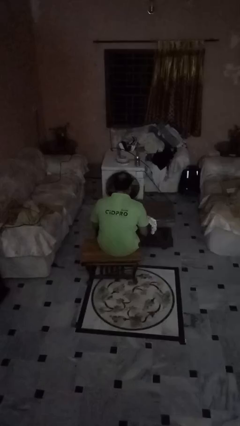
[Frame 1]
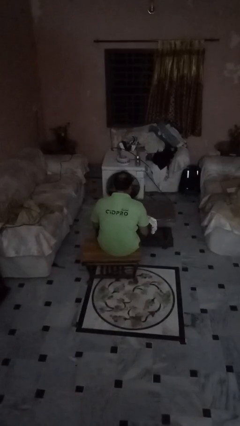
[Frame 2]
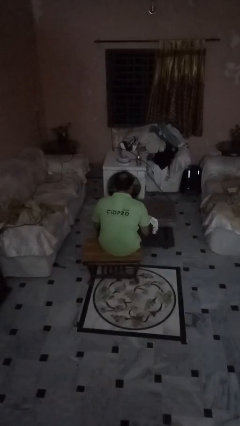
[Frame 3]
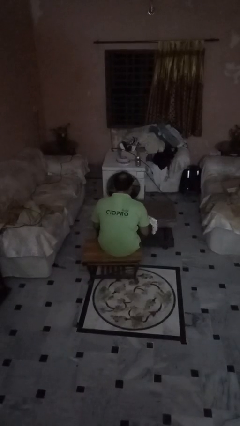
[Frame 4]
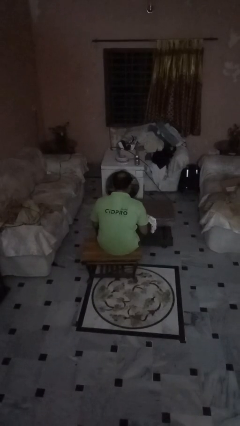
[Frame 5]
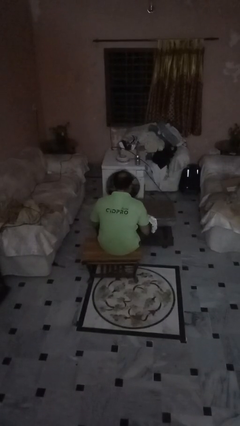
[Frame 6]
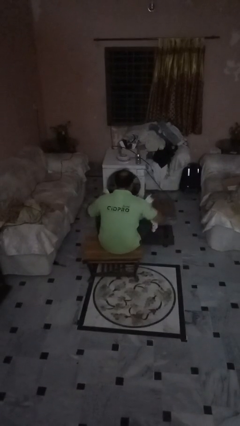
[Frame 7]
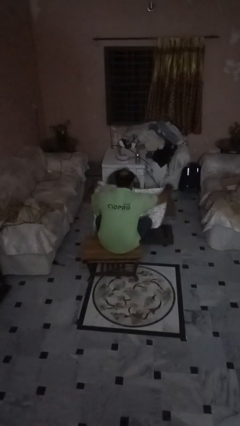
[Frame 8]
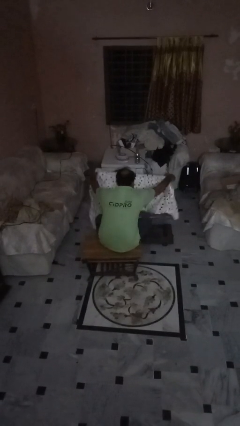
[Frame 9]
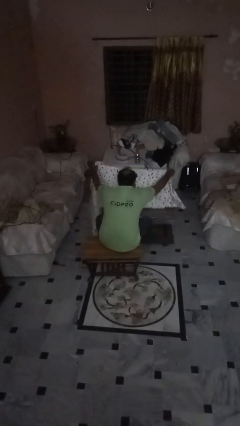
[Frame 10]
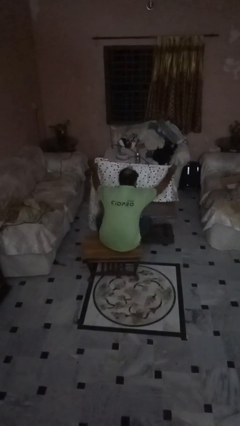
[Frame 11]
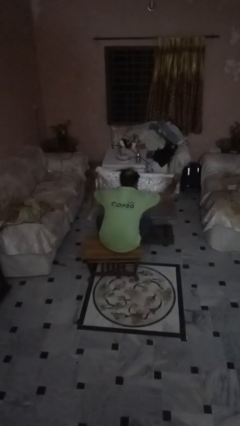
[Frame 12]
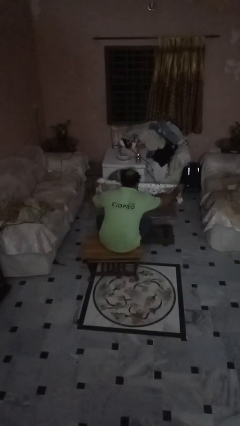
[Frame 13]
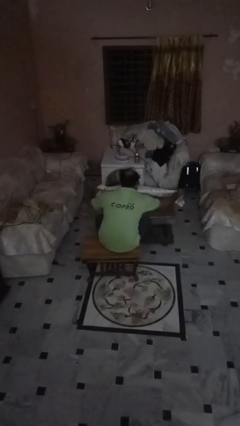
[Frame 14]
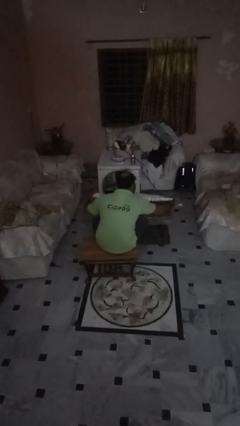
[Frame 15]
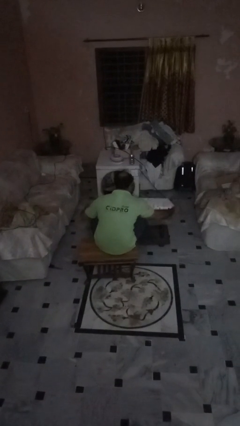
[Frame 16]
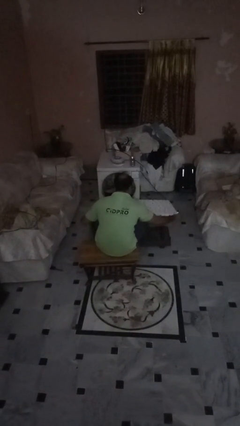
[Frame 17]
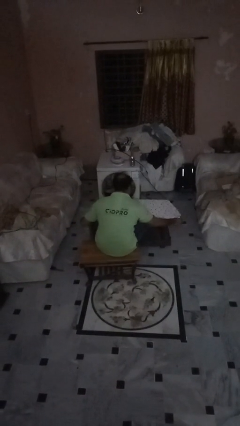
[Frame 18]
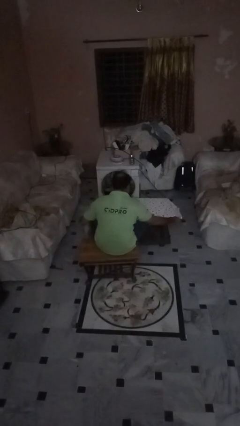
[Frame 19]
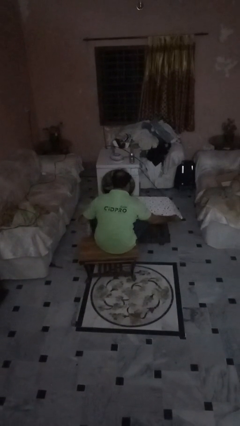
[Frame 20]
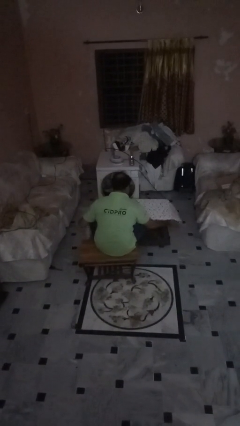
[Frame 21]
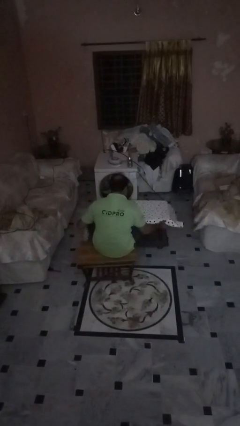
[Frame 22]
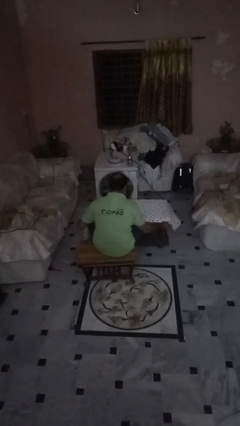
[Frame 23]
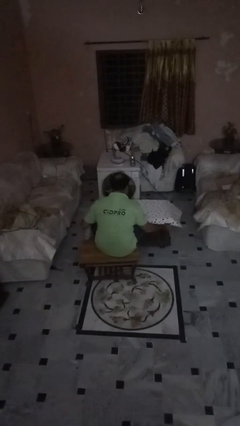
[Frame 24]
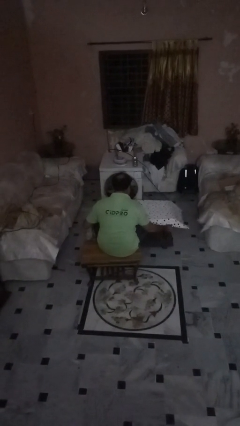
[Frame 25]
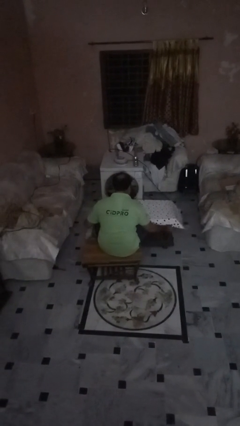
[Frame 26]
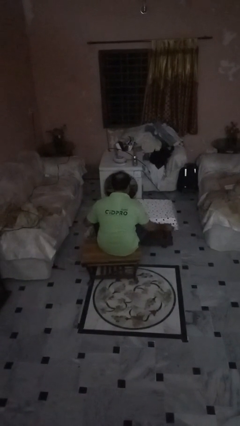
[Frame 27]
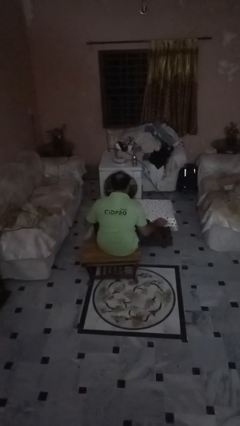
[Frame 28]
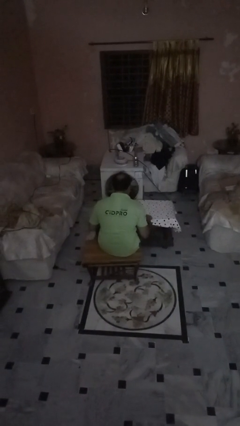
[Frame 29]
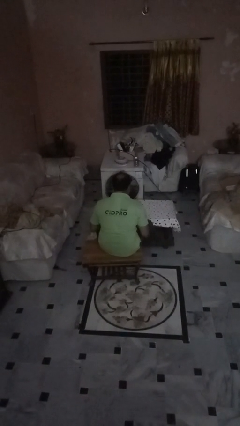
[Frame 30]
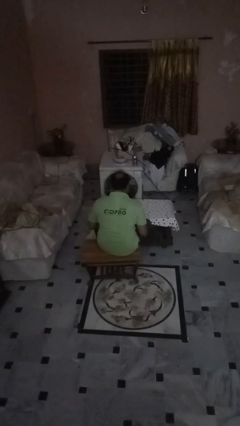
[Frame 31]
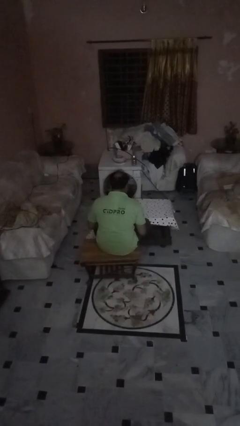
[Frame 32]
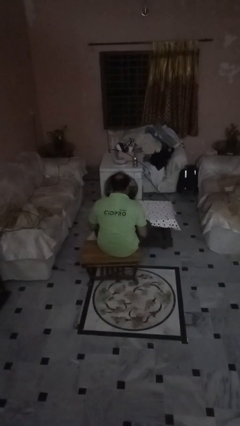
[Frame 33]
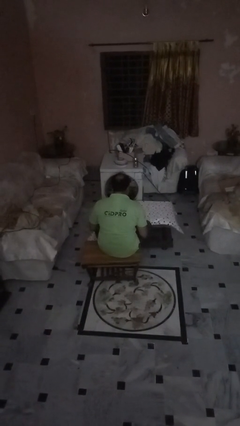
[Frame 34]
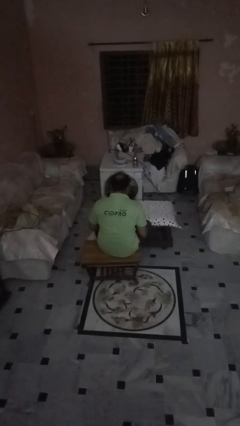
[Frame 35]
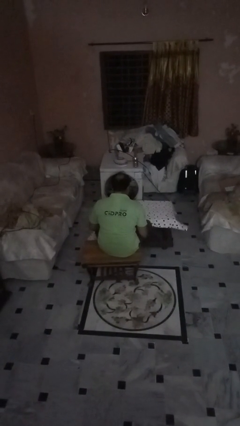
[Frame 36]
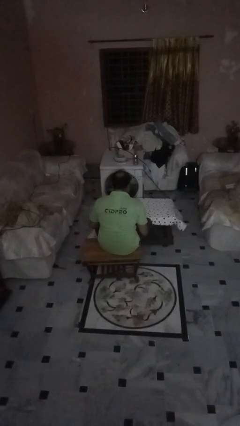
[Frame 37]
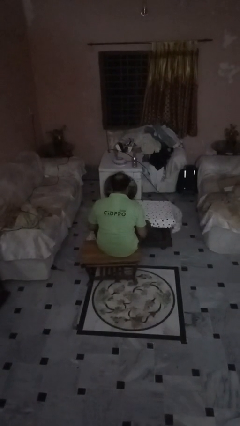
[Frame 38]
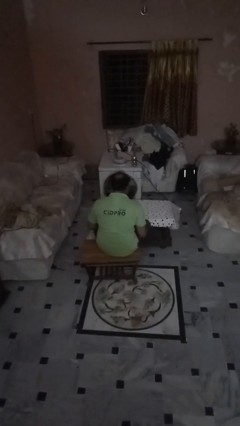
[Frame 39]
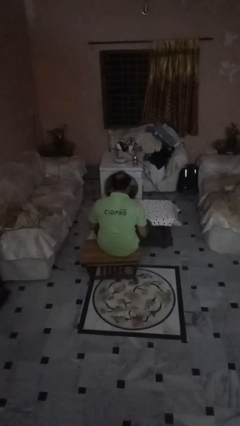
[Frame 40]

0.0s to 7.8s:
person spreads tablecloth

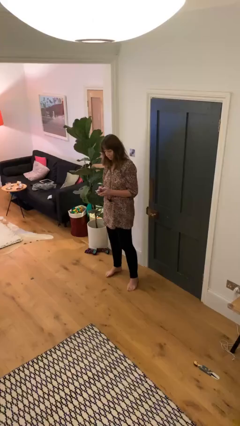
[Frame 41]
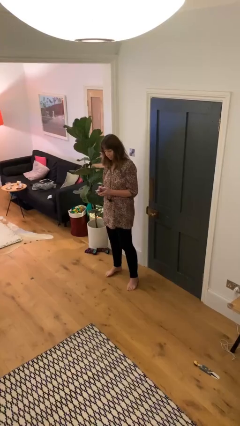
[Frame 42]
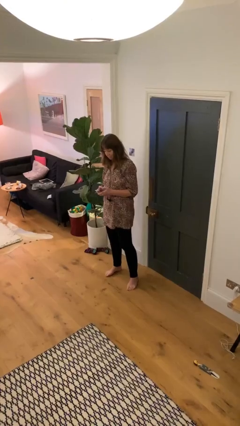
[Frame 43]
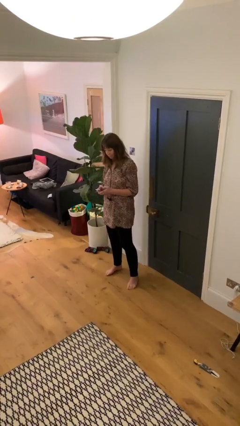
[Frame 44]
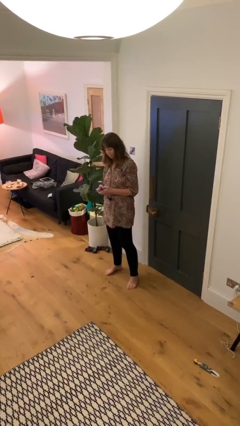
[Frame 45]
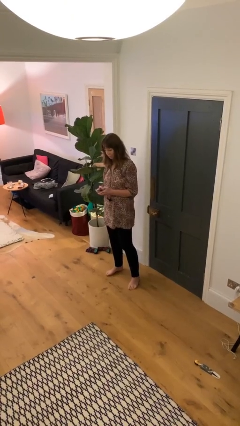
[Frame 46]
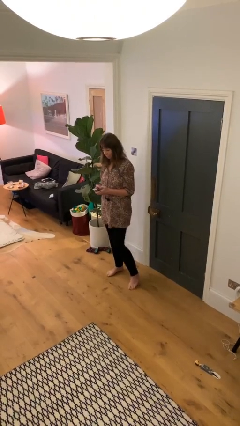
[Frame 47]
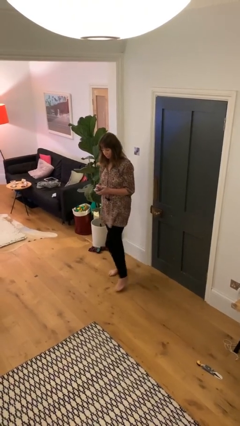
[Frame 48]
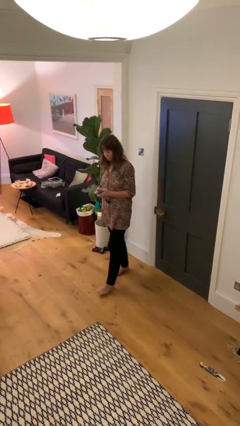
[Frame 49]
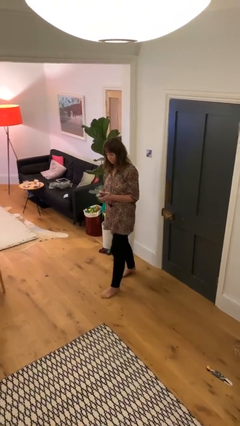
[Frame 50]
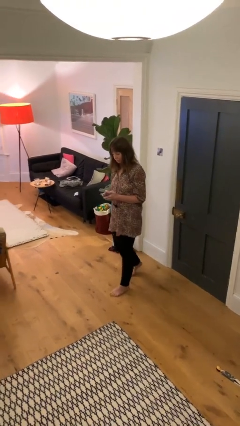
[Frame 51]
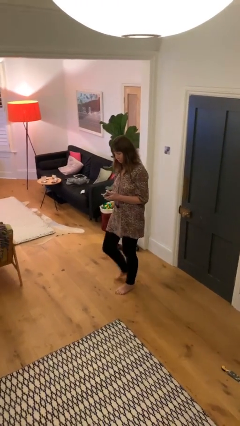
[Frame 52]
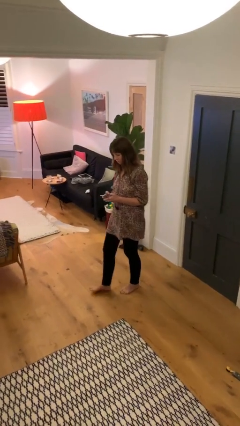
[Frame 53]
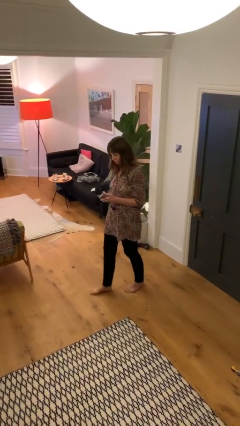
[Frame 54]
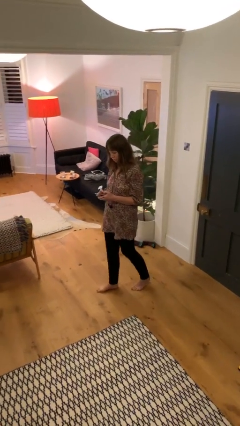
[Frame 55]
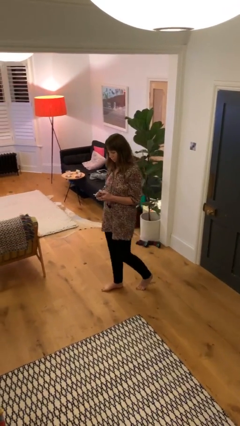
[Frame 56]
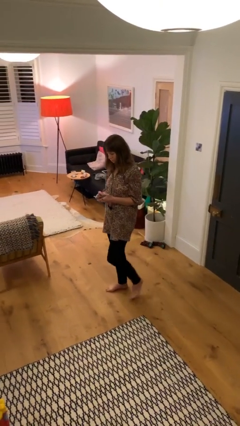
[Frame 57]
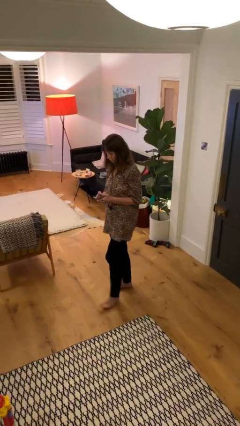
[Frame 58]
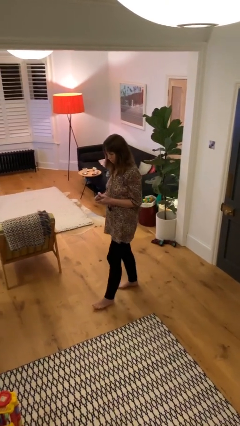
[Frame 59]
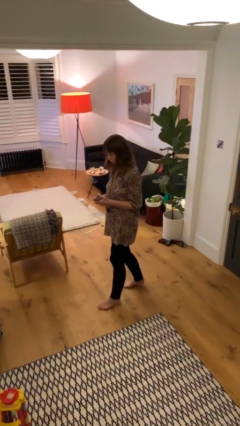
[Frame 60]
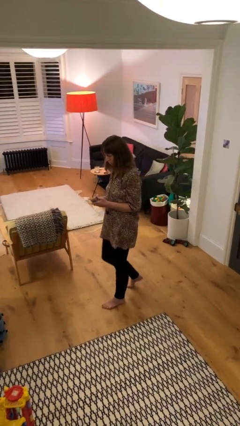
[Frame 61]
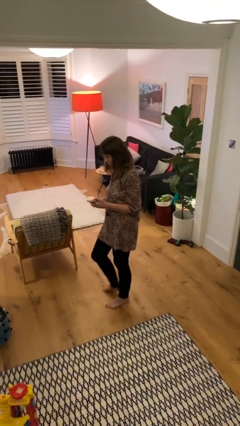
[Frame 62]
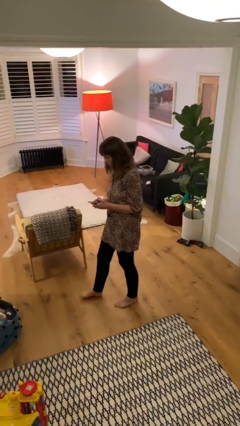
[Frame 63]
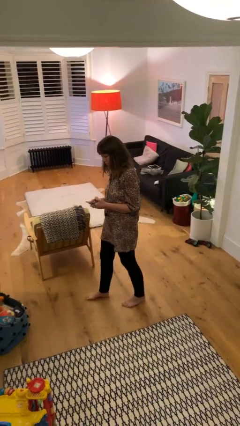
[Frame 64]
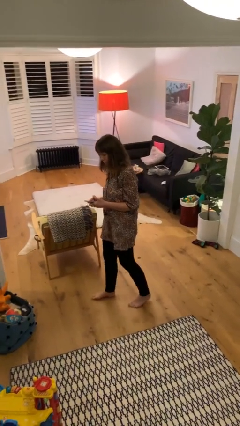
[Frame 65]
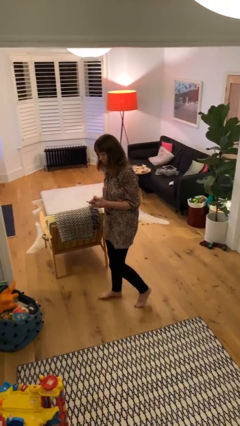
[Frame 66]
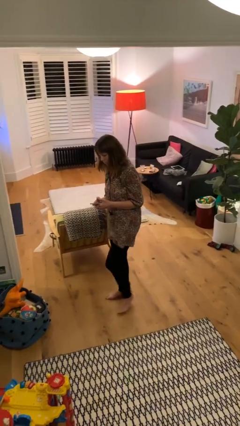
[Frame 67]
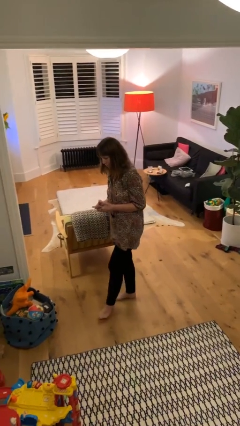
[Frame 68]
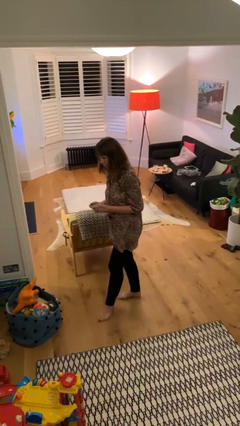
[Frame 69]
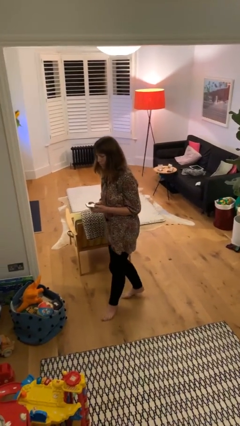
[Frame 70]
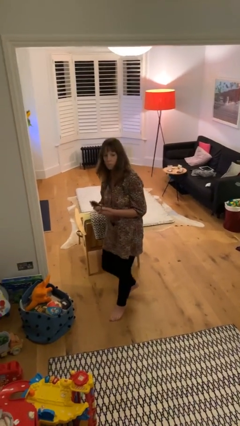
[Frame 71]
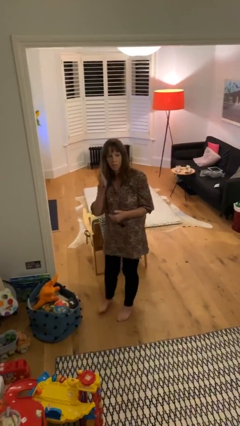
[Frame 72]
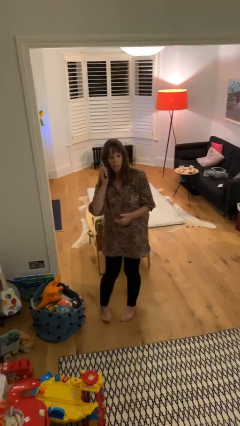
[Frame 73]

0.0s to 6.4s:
person texts on phone

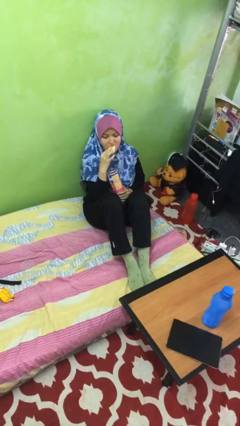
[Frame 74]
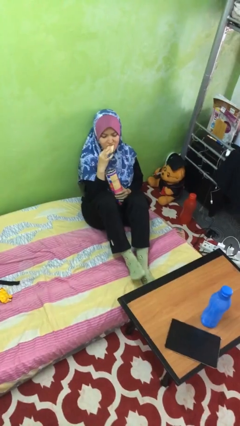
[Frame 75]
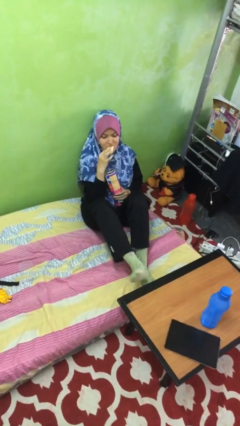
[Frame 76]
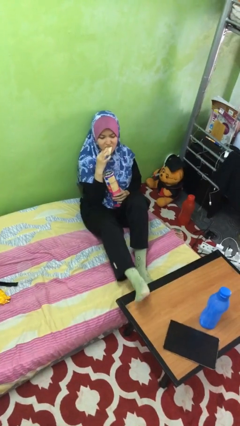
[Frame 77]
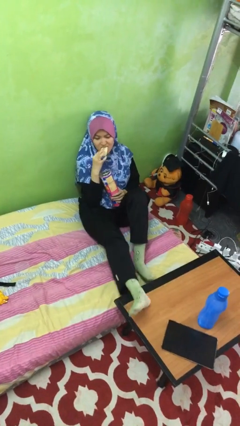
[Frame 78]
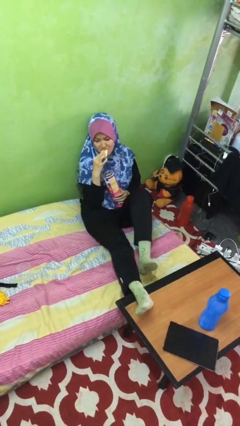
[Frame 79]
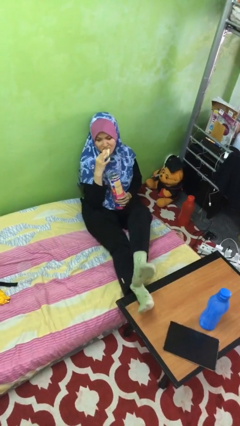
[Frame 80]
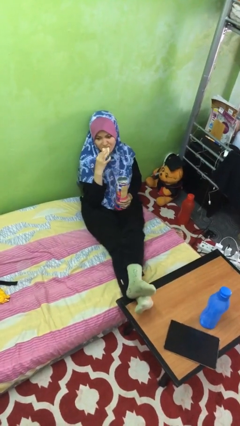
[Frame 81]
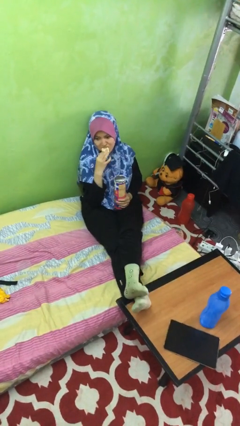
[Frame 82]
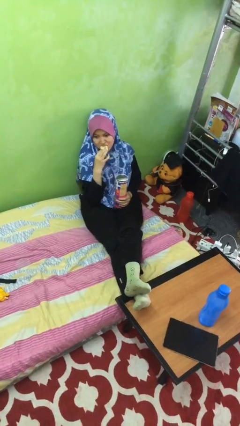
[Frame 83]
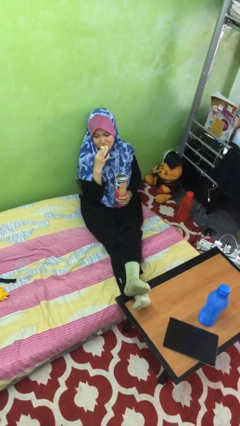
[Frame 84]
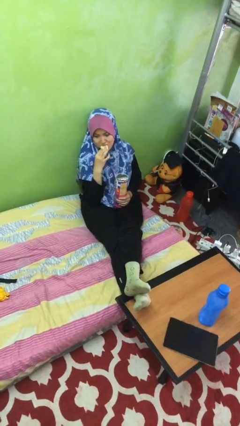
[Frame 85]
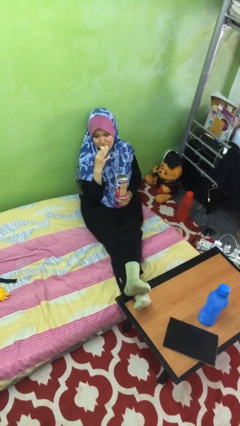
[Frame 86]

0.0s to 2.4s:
person puts feet up

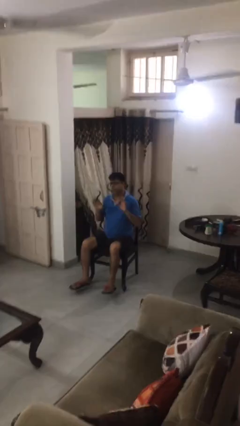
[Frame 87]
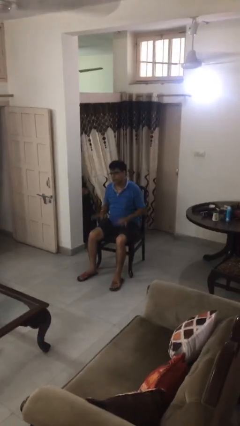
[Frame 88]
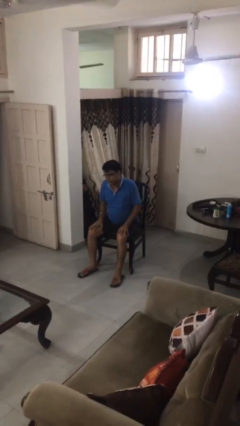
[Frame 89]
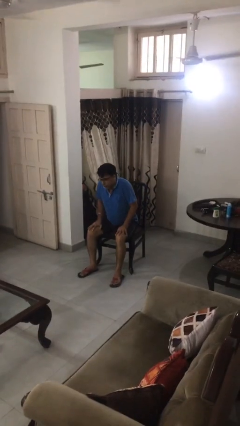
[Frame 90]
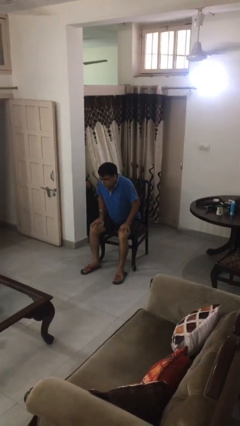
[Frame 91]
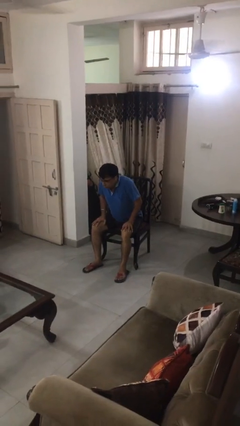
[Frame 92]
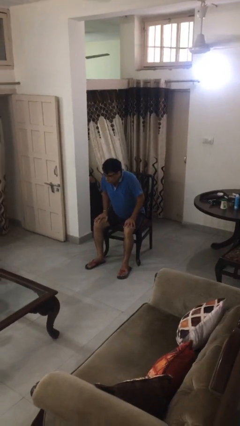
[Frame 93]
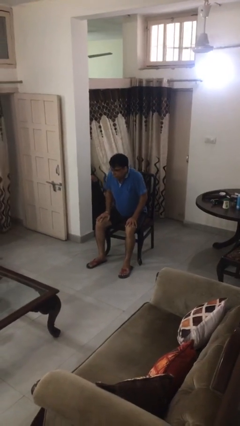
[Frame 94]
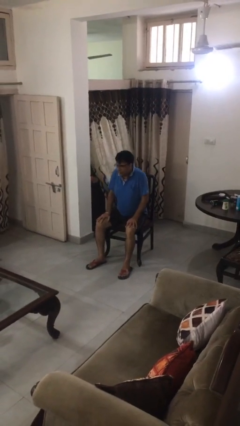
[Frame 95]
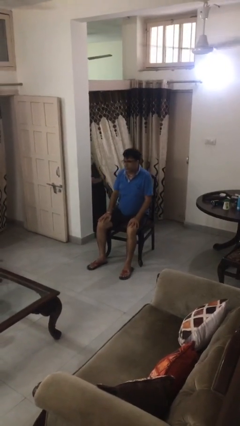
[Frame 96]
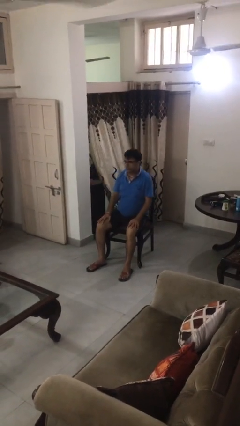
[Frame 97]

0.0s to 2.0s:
person slaps hands on thighs
